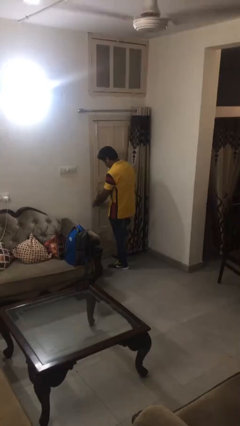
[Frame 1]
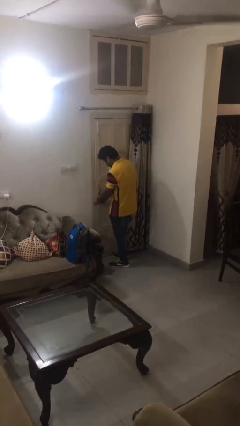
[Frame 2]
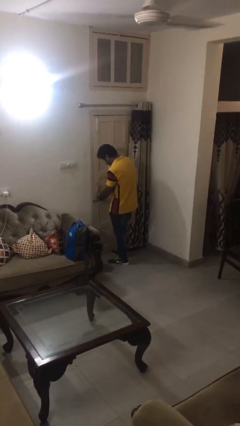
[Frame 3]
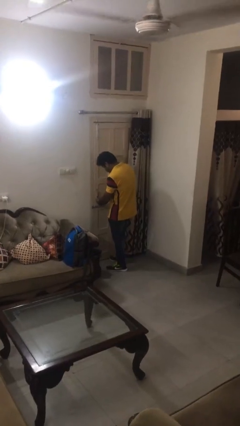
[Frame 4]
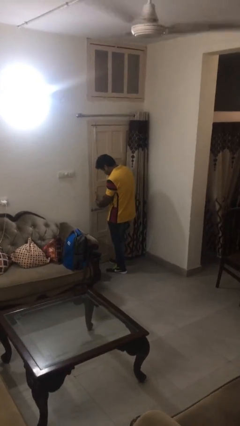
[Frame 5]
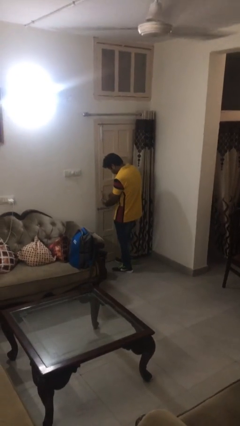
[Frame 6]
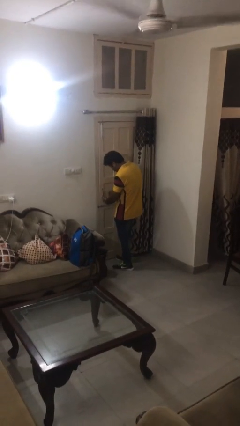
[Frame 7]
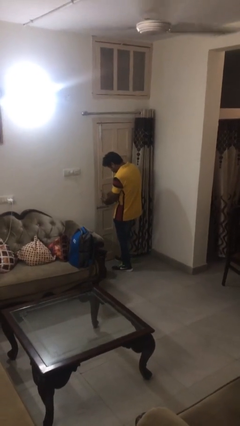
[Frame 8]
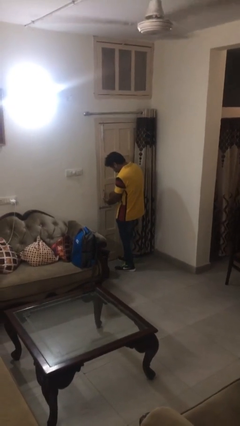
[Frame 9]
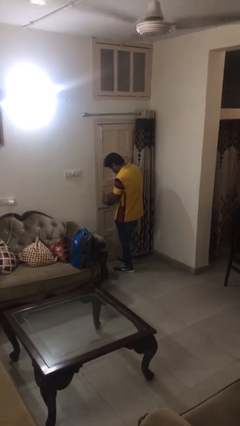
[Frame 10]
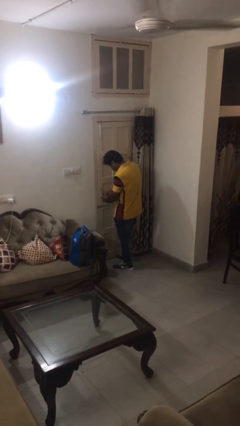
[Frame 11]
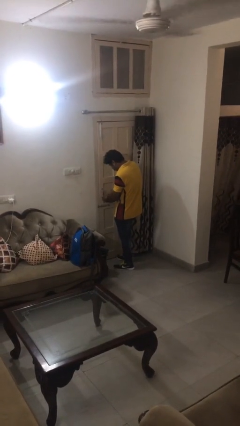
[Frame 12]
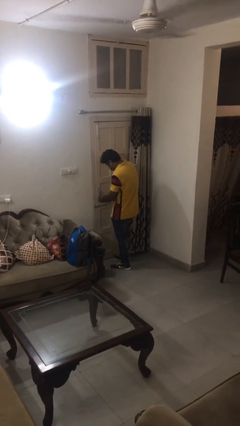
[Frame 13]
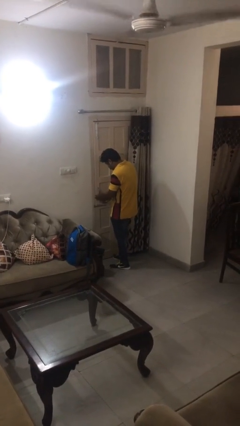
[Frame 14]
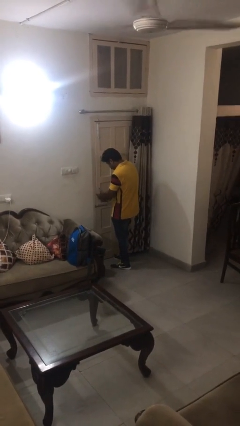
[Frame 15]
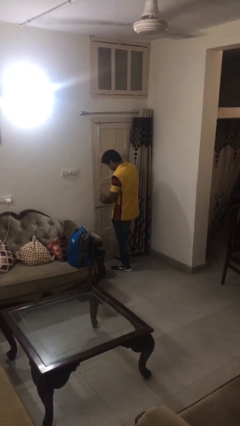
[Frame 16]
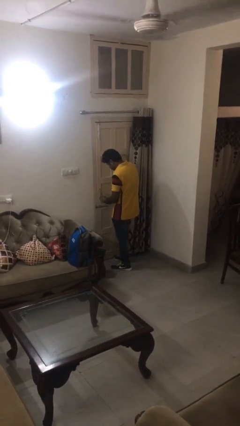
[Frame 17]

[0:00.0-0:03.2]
person unlocks door with keys

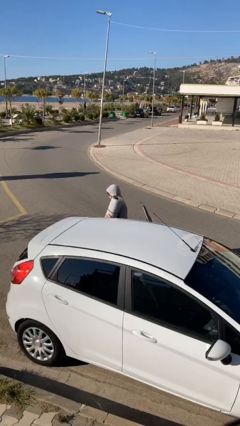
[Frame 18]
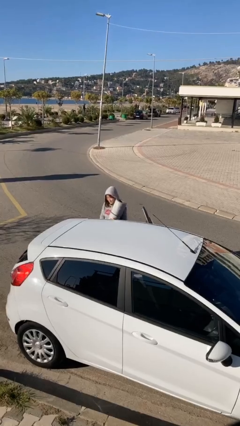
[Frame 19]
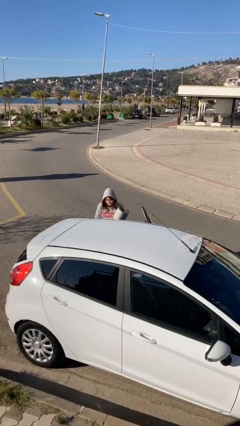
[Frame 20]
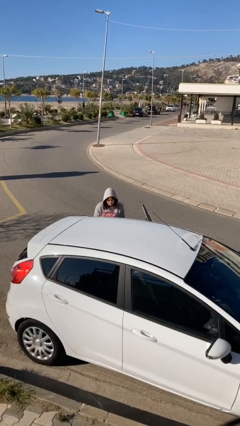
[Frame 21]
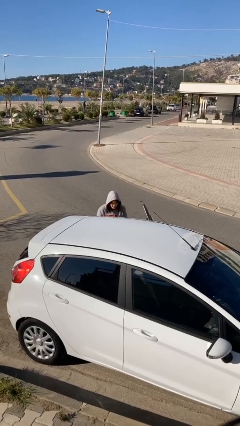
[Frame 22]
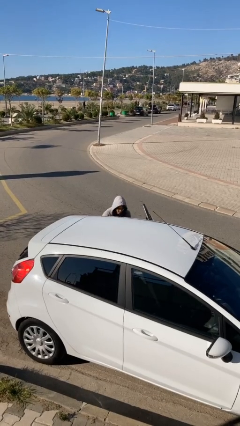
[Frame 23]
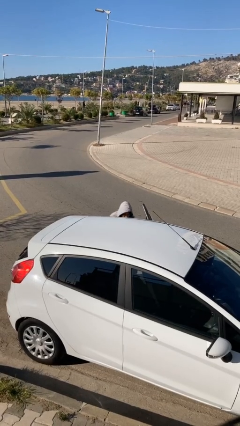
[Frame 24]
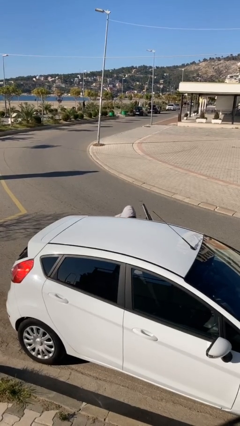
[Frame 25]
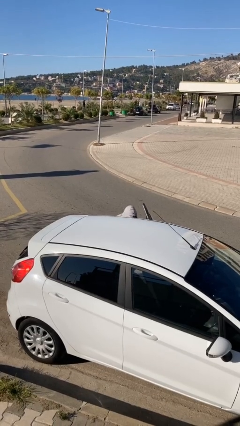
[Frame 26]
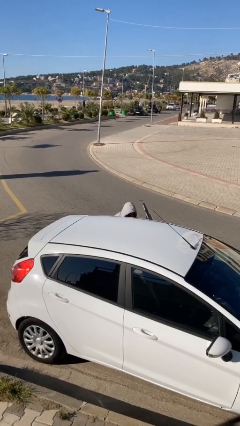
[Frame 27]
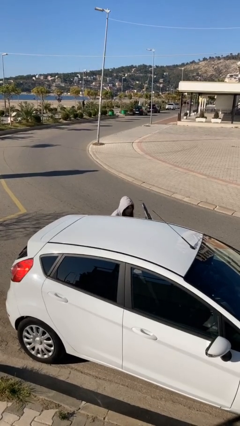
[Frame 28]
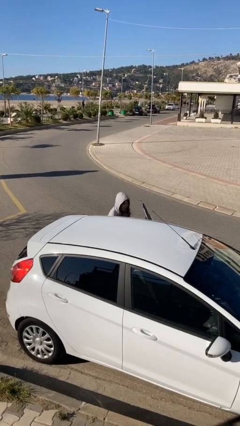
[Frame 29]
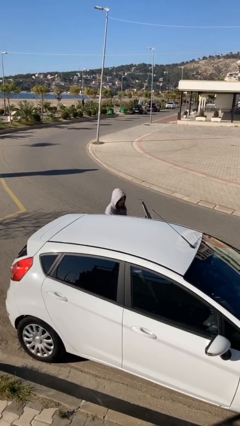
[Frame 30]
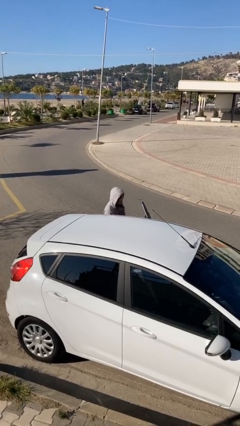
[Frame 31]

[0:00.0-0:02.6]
person loads car

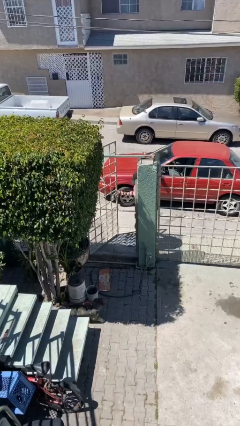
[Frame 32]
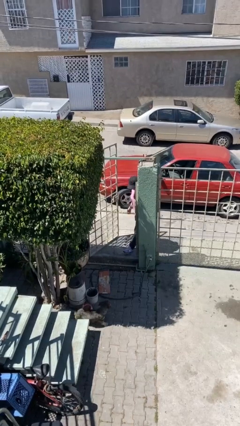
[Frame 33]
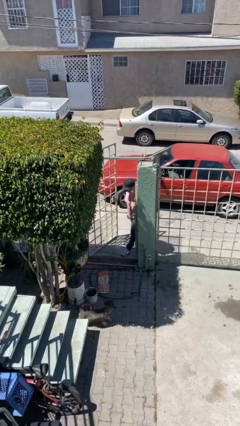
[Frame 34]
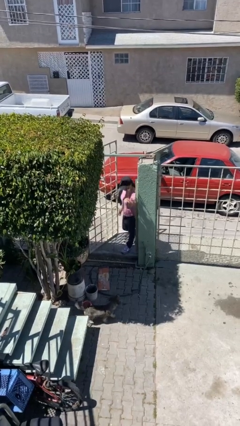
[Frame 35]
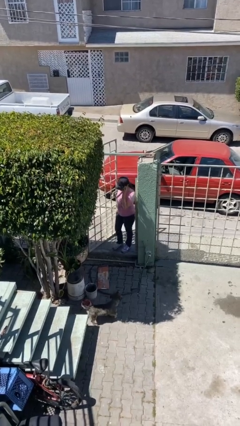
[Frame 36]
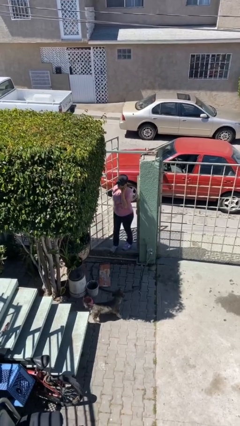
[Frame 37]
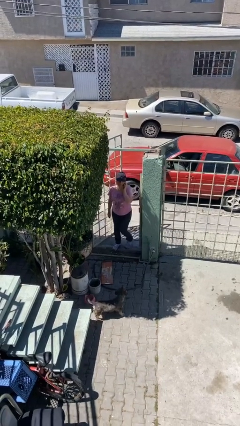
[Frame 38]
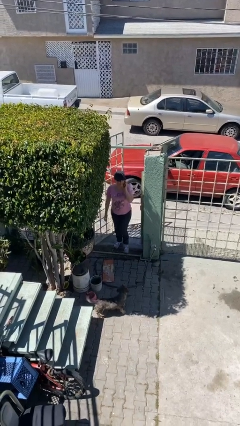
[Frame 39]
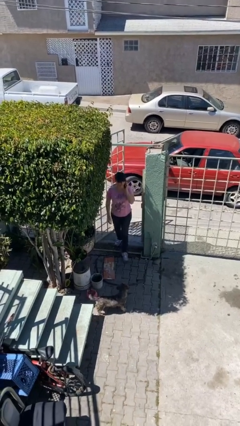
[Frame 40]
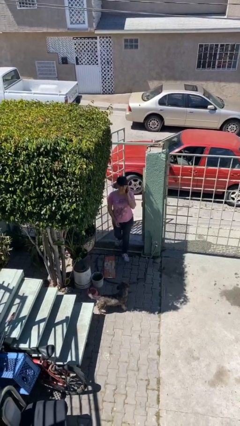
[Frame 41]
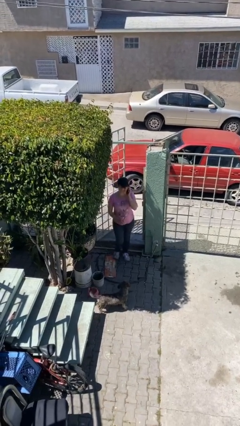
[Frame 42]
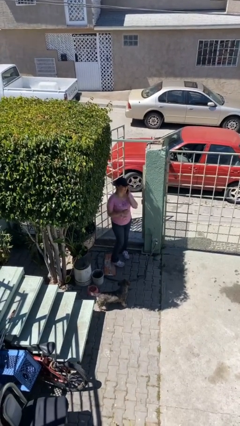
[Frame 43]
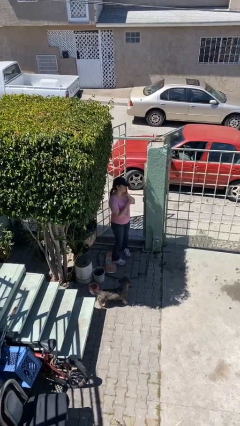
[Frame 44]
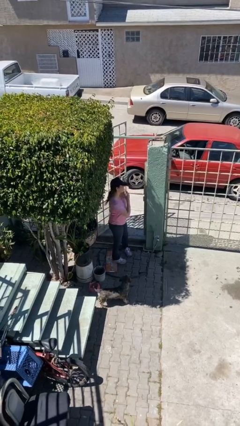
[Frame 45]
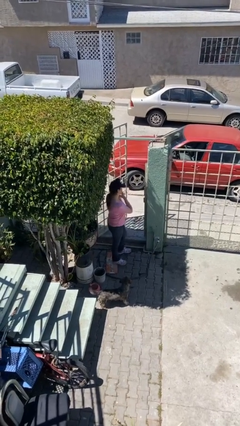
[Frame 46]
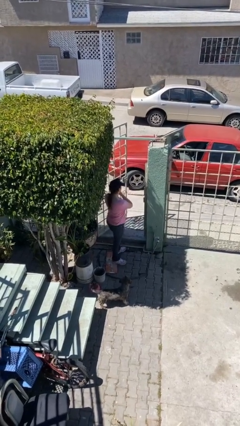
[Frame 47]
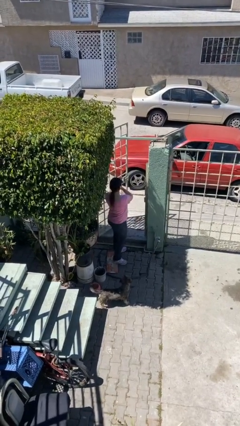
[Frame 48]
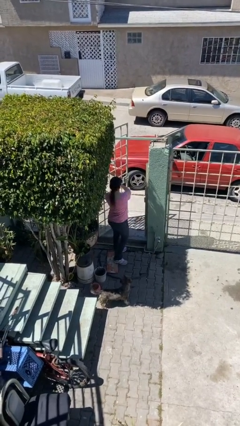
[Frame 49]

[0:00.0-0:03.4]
person enters scene through structure

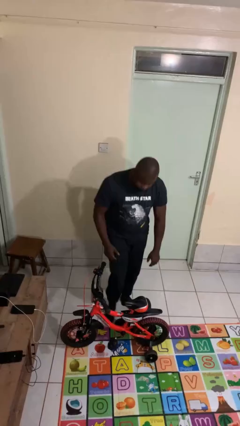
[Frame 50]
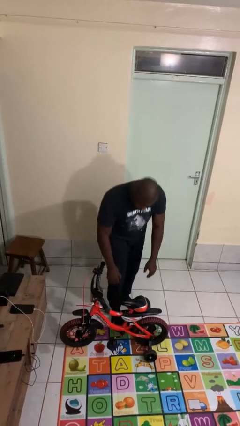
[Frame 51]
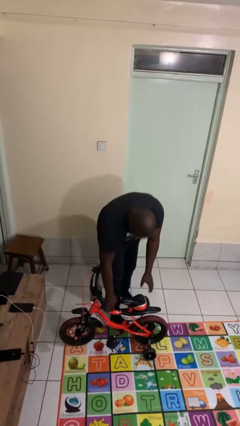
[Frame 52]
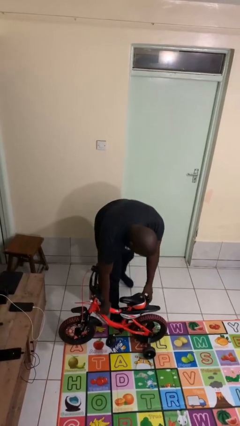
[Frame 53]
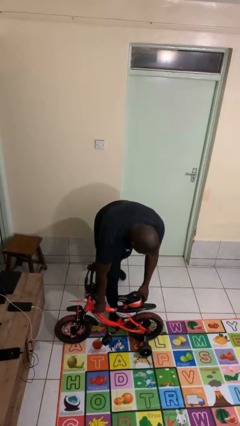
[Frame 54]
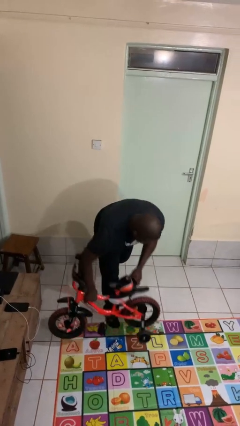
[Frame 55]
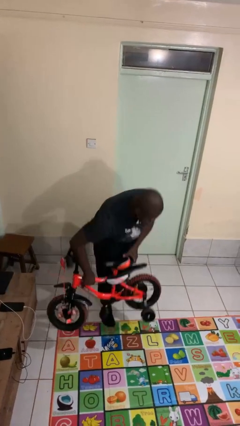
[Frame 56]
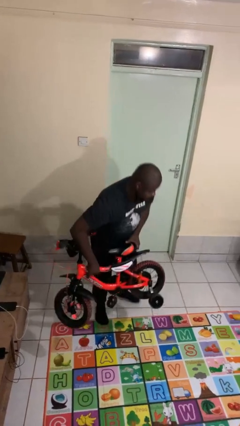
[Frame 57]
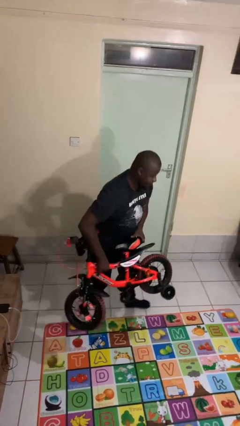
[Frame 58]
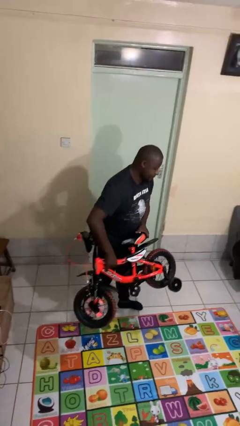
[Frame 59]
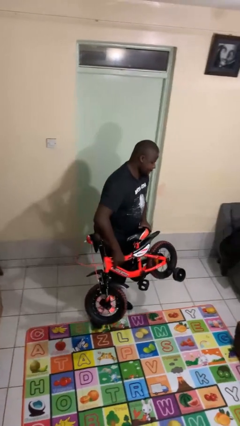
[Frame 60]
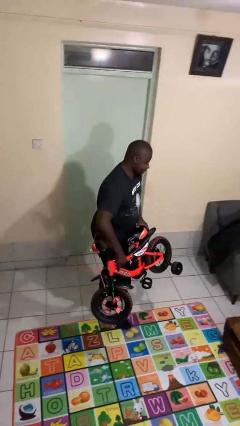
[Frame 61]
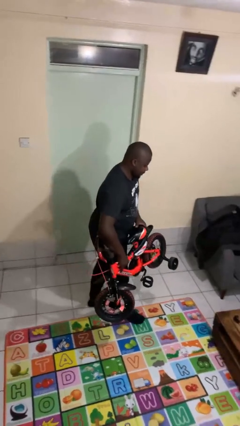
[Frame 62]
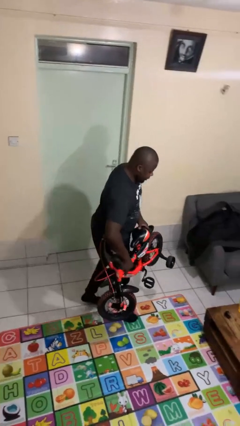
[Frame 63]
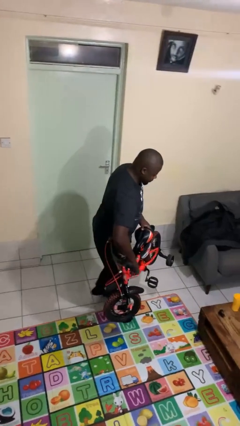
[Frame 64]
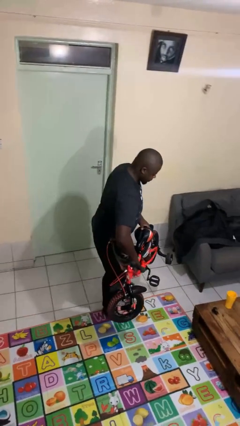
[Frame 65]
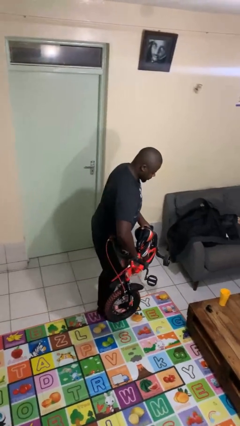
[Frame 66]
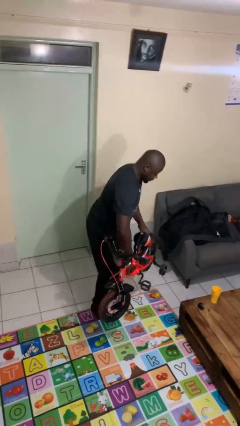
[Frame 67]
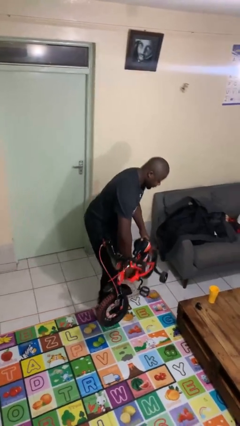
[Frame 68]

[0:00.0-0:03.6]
person carries bicycle

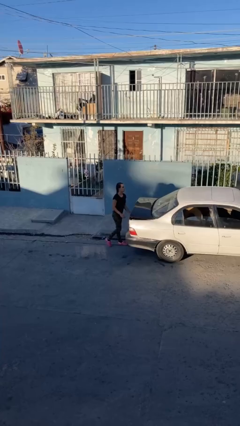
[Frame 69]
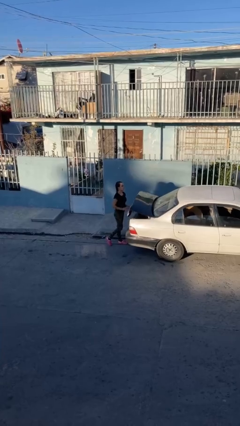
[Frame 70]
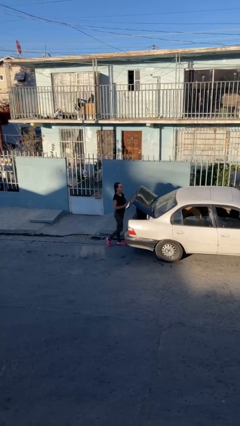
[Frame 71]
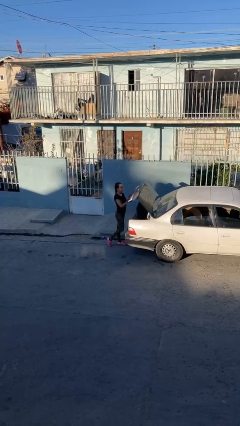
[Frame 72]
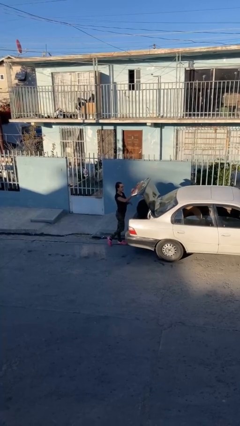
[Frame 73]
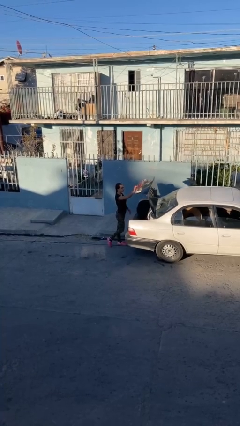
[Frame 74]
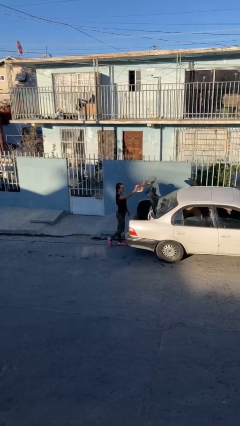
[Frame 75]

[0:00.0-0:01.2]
person opens car trunk

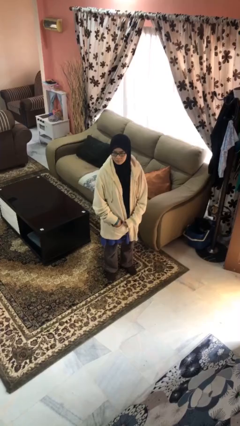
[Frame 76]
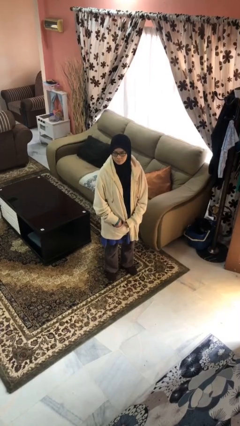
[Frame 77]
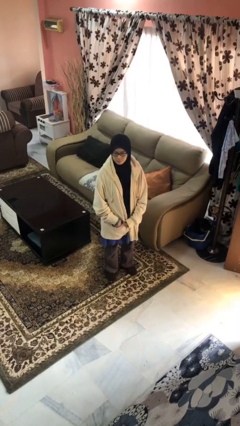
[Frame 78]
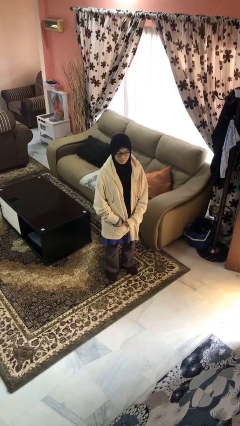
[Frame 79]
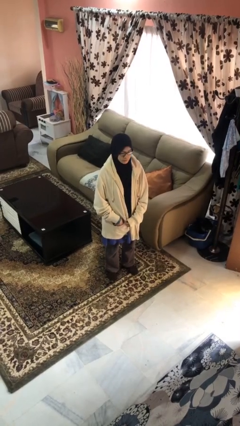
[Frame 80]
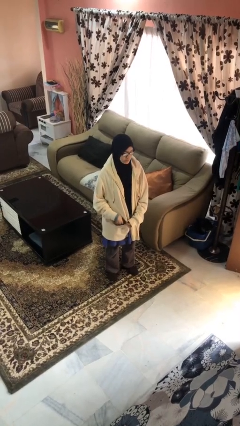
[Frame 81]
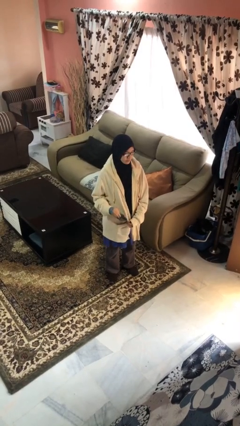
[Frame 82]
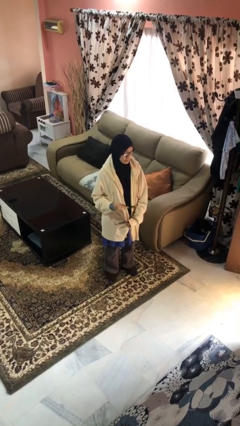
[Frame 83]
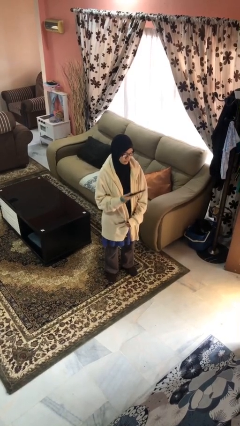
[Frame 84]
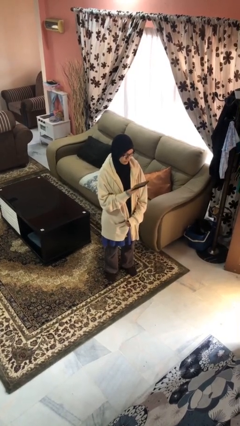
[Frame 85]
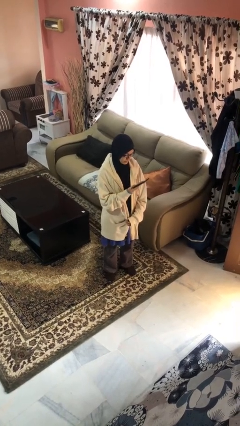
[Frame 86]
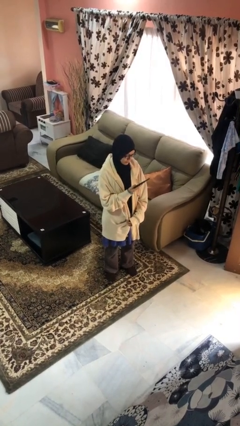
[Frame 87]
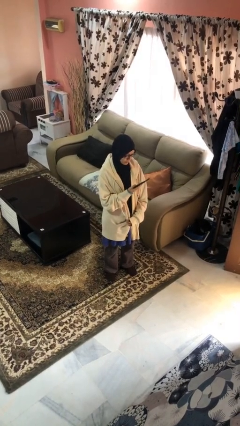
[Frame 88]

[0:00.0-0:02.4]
person takes phone from pocket

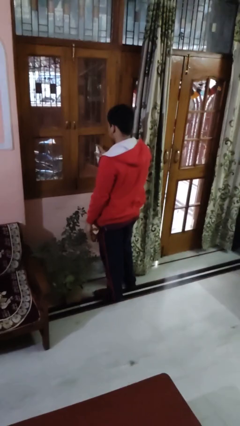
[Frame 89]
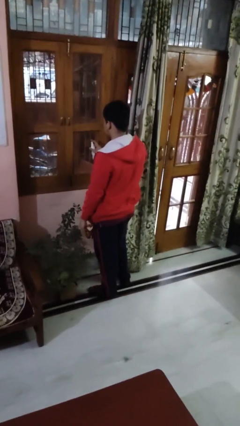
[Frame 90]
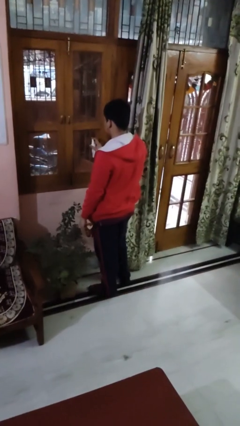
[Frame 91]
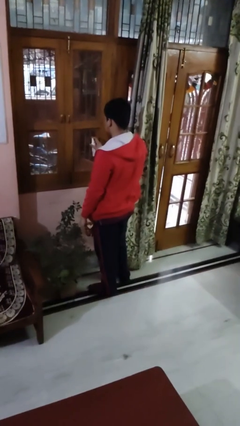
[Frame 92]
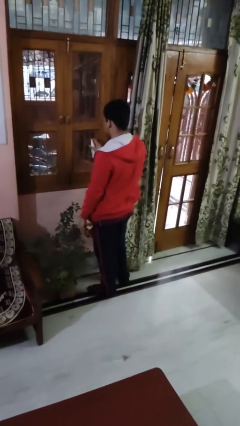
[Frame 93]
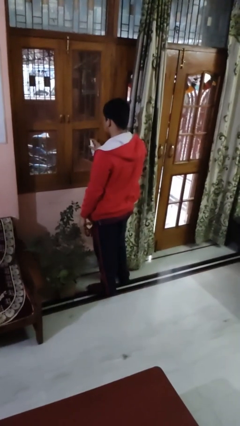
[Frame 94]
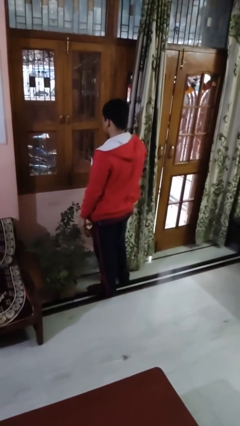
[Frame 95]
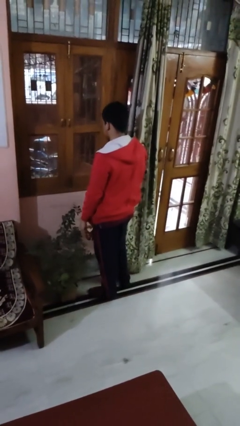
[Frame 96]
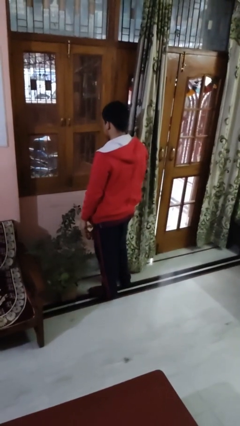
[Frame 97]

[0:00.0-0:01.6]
person sprays from bottle
